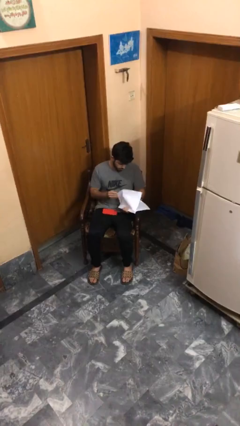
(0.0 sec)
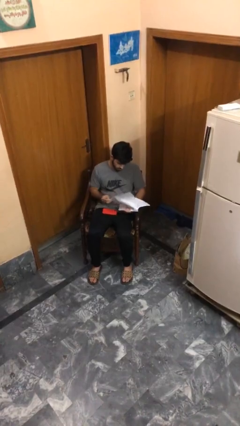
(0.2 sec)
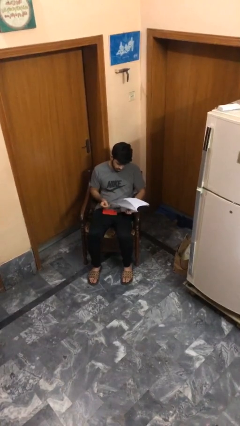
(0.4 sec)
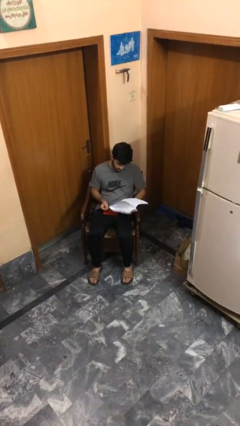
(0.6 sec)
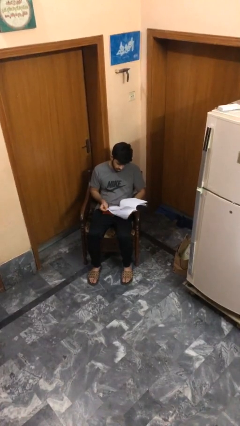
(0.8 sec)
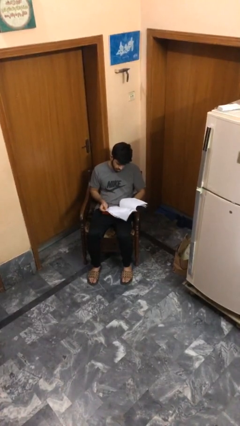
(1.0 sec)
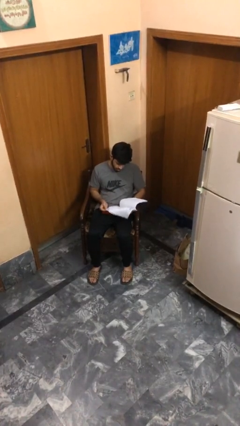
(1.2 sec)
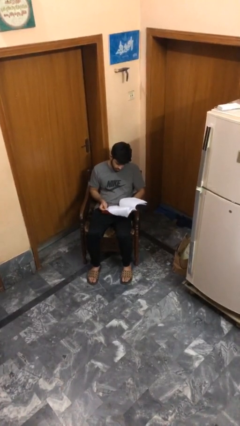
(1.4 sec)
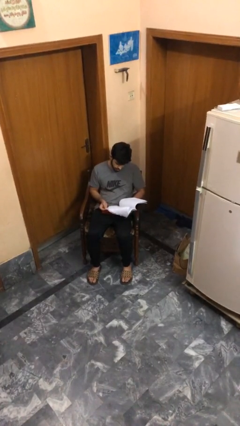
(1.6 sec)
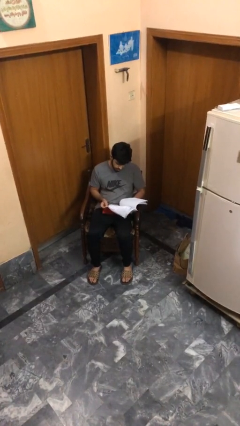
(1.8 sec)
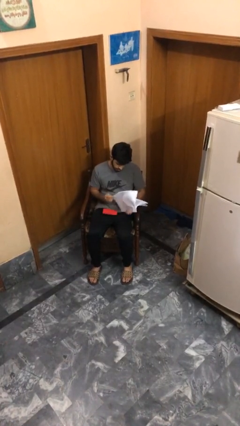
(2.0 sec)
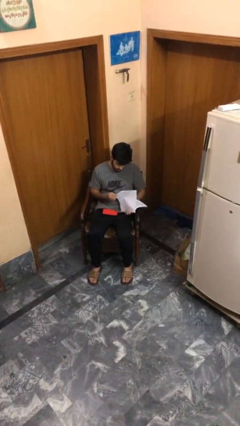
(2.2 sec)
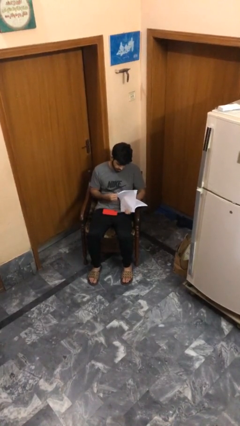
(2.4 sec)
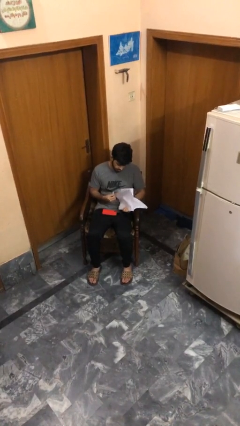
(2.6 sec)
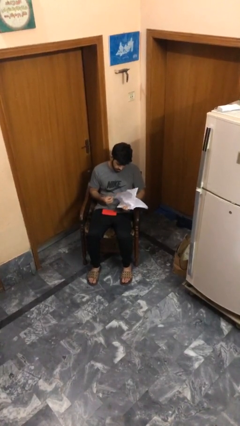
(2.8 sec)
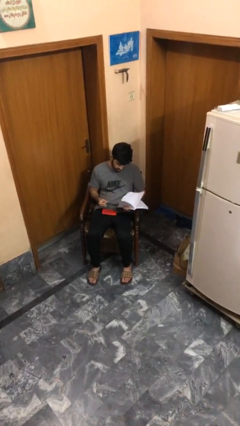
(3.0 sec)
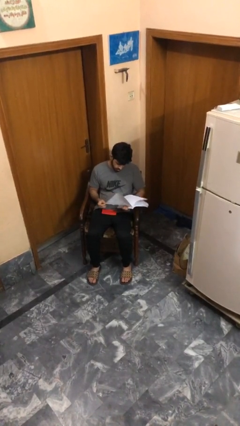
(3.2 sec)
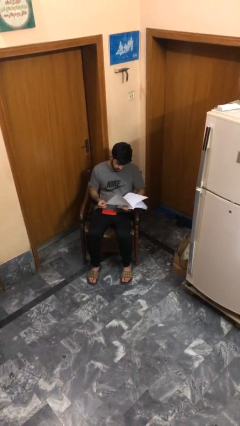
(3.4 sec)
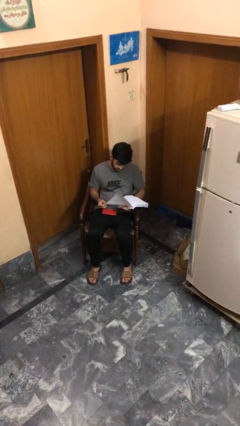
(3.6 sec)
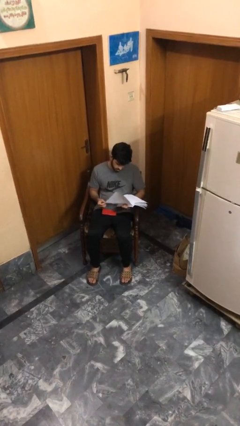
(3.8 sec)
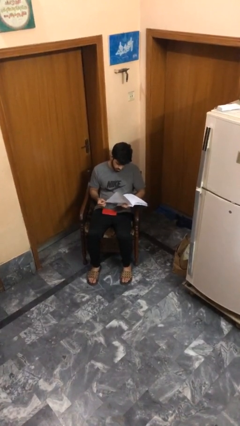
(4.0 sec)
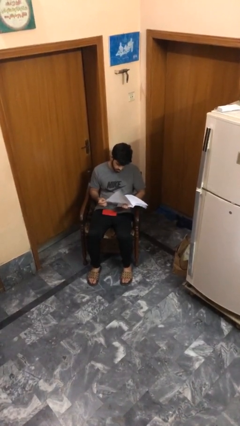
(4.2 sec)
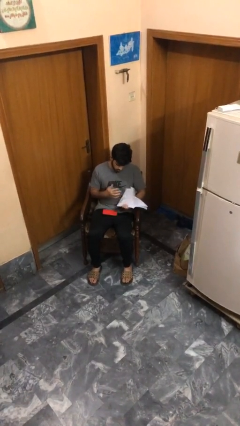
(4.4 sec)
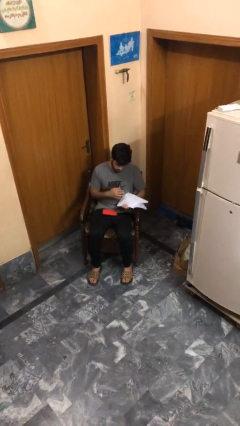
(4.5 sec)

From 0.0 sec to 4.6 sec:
person reads magazine

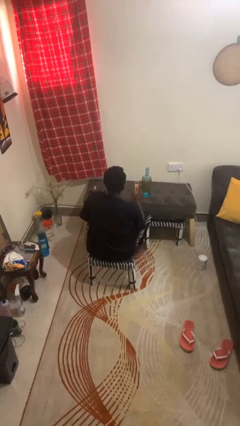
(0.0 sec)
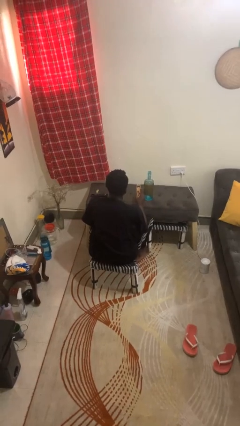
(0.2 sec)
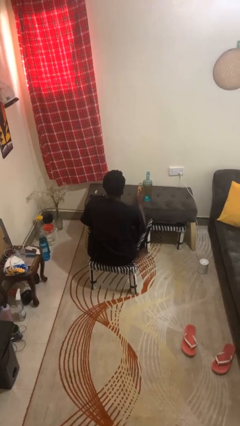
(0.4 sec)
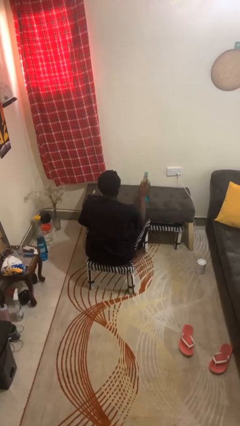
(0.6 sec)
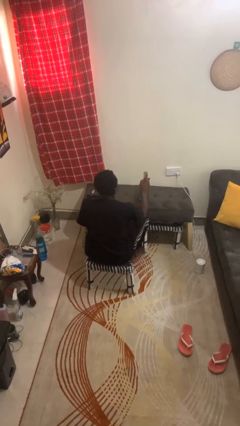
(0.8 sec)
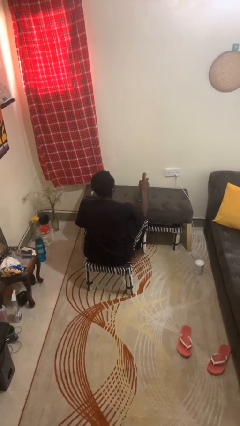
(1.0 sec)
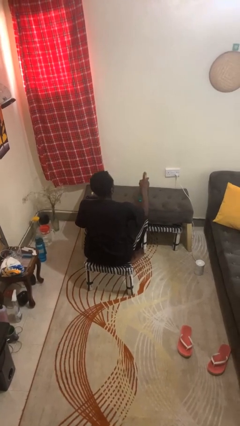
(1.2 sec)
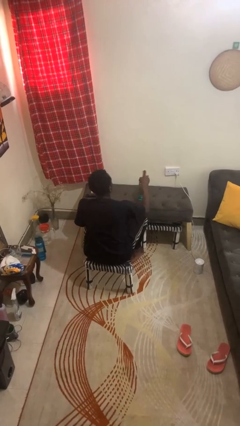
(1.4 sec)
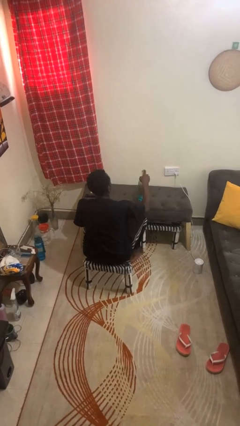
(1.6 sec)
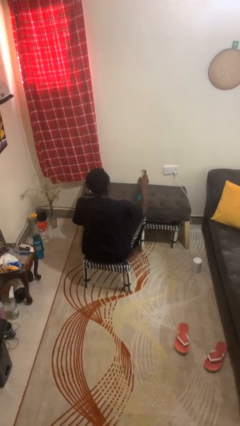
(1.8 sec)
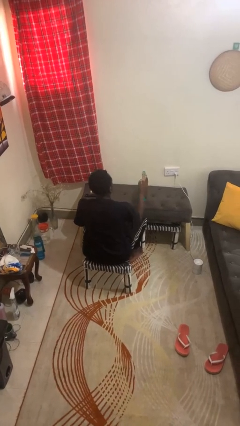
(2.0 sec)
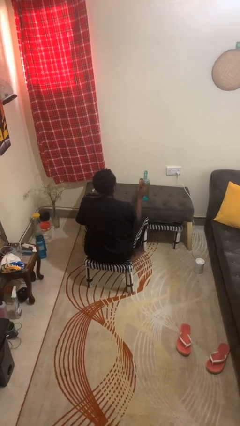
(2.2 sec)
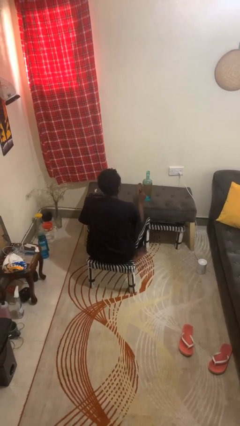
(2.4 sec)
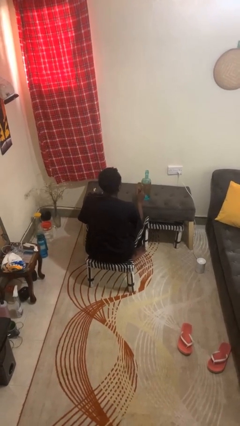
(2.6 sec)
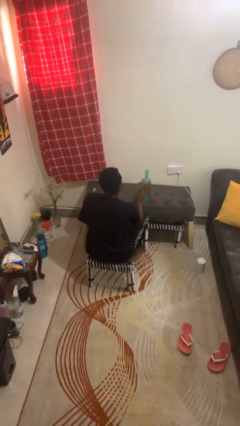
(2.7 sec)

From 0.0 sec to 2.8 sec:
person opens can with can opener

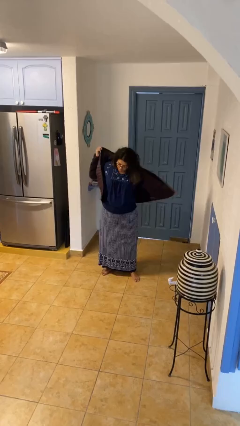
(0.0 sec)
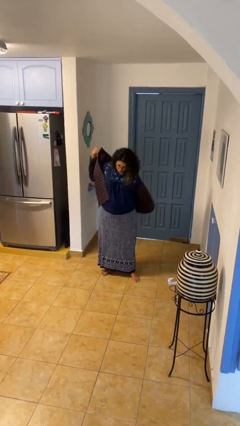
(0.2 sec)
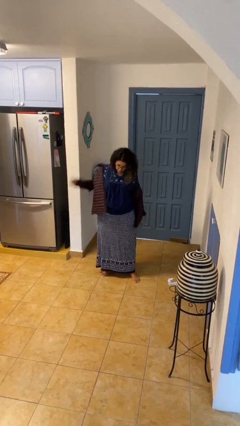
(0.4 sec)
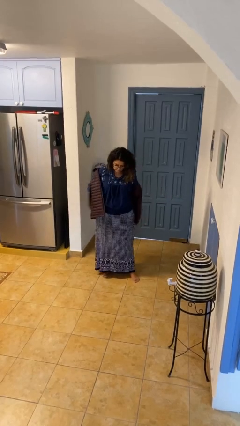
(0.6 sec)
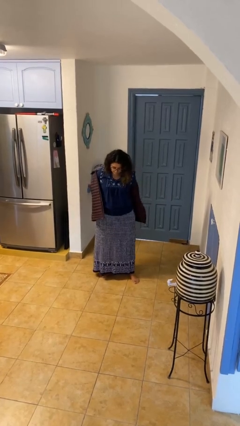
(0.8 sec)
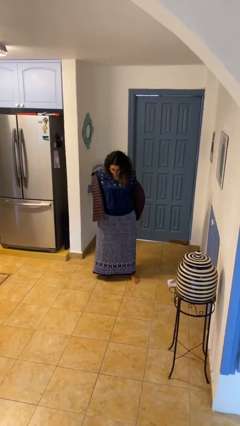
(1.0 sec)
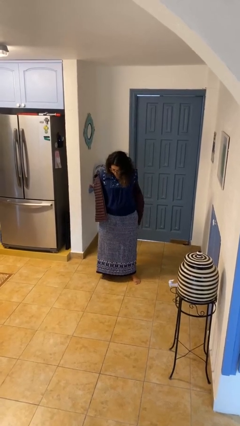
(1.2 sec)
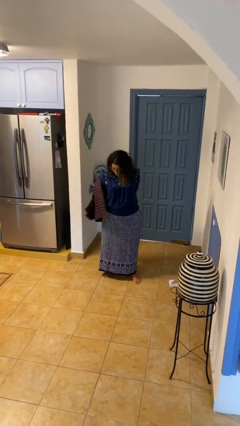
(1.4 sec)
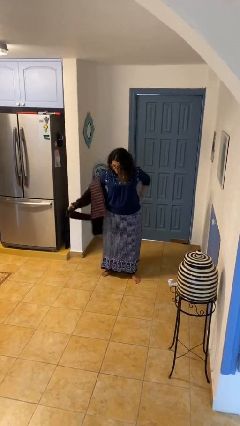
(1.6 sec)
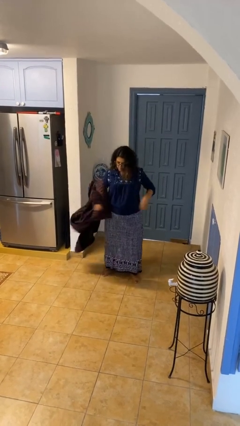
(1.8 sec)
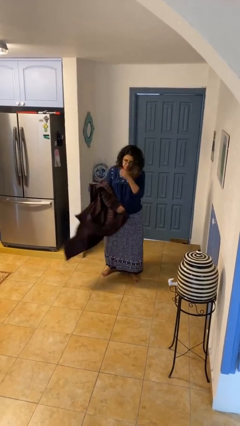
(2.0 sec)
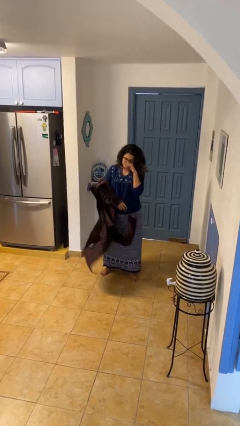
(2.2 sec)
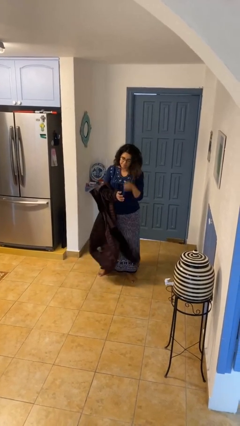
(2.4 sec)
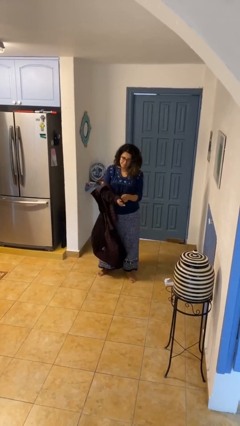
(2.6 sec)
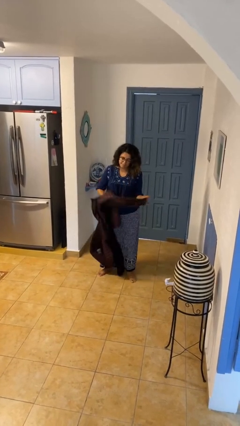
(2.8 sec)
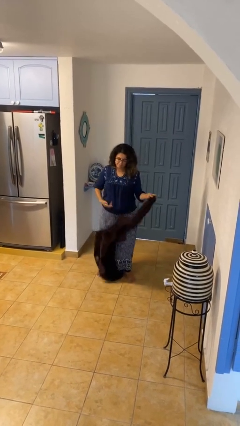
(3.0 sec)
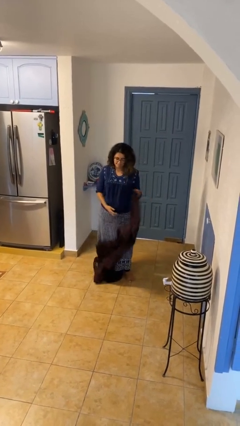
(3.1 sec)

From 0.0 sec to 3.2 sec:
person takes off jacket

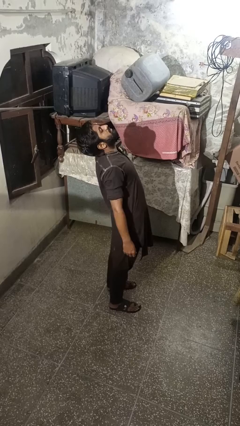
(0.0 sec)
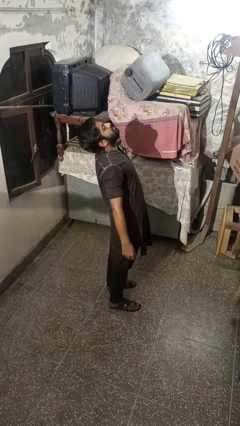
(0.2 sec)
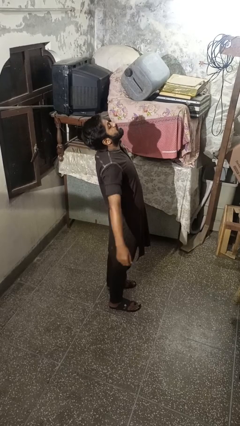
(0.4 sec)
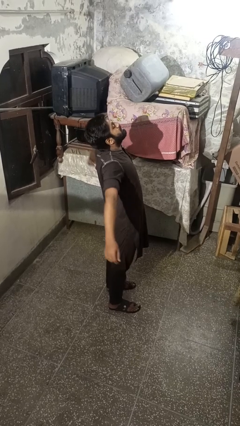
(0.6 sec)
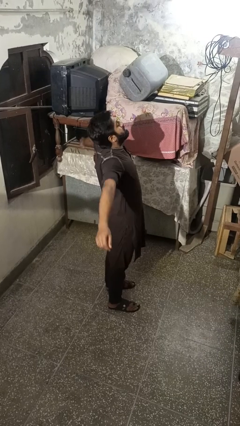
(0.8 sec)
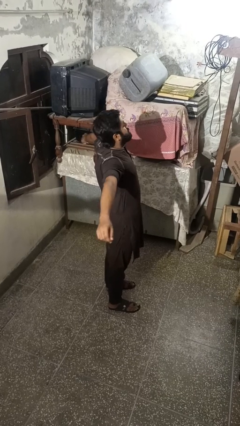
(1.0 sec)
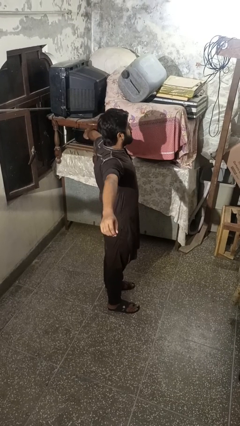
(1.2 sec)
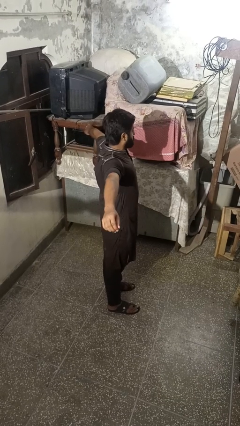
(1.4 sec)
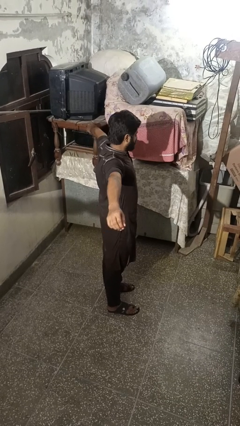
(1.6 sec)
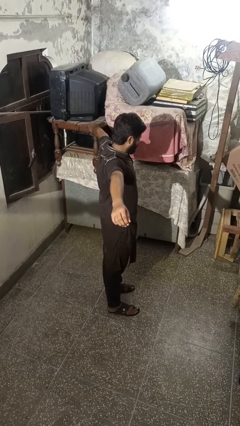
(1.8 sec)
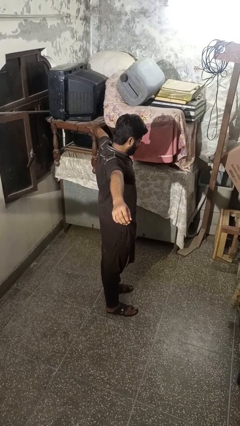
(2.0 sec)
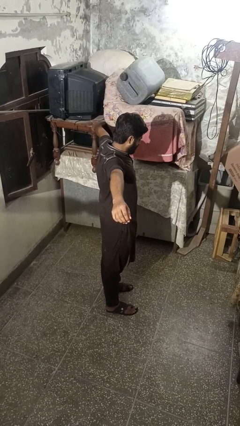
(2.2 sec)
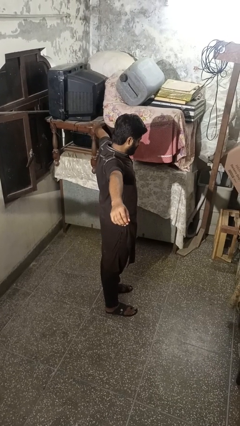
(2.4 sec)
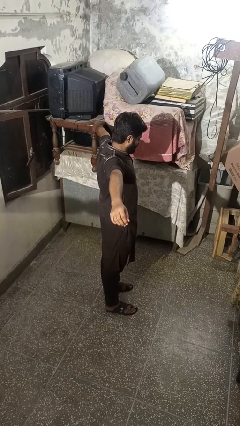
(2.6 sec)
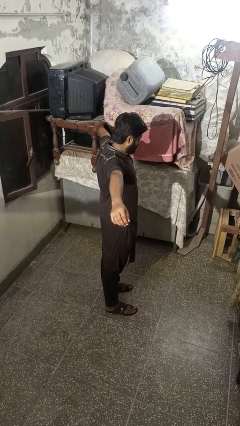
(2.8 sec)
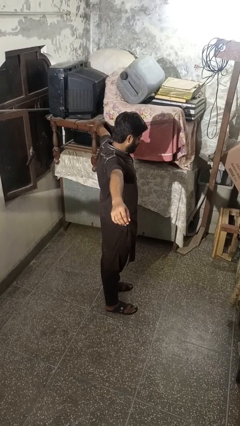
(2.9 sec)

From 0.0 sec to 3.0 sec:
person stretches arms to side

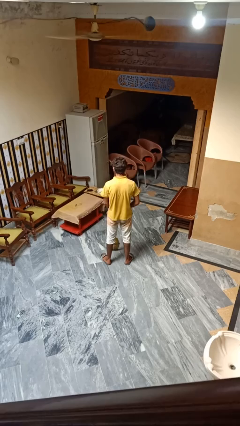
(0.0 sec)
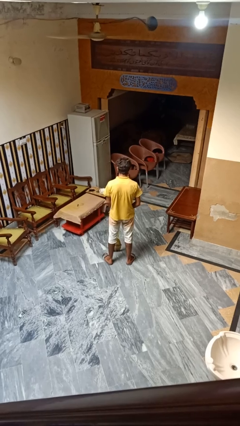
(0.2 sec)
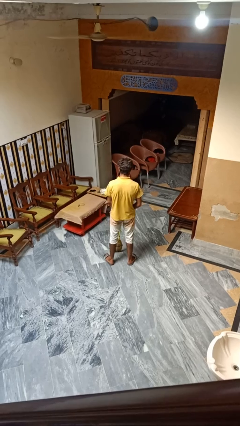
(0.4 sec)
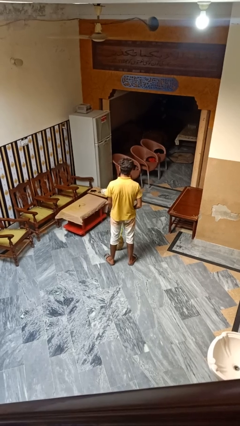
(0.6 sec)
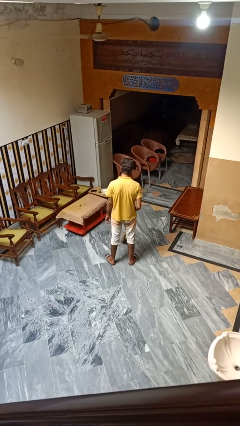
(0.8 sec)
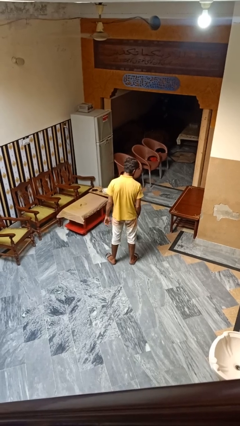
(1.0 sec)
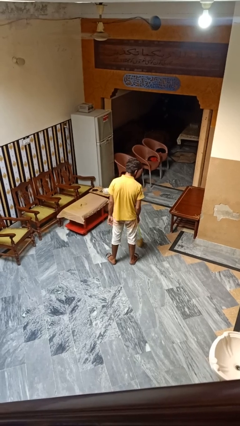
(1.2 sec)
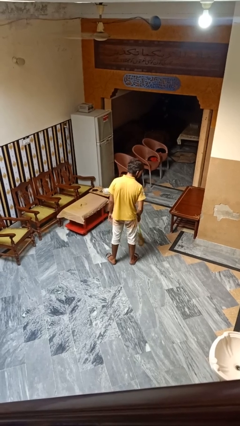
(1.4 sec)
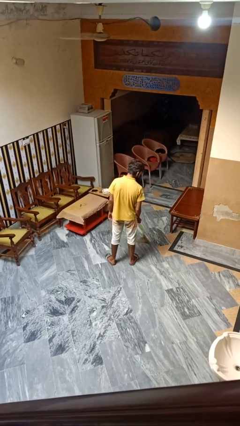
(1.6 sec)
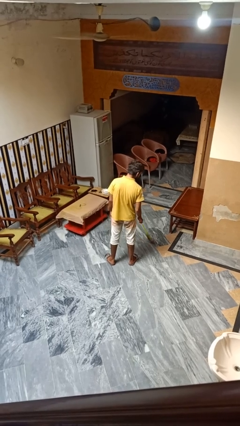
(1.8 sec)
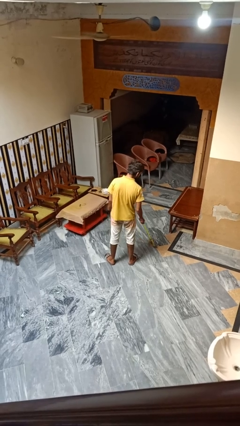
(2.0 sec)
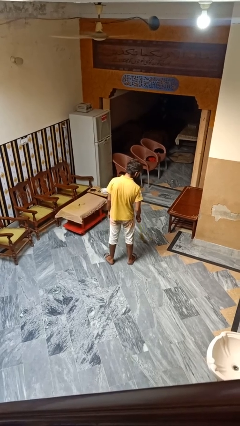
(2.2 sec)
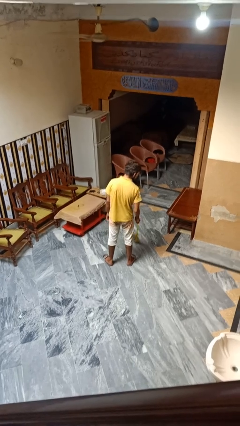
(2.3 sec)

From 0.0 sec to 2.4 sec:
person mops

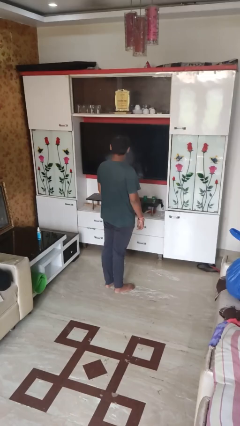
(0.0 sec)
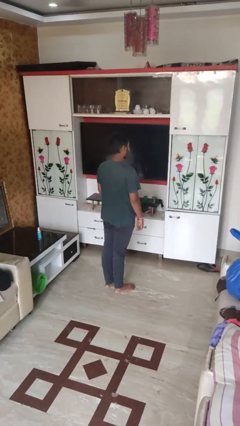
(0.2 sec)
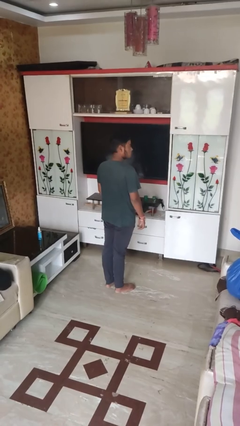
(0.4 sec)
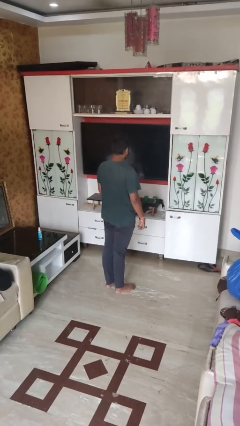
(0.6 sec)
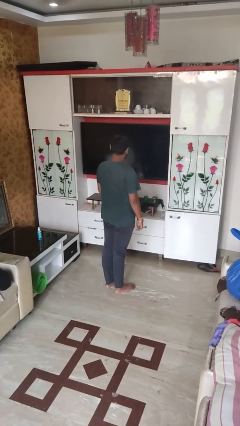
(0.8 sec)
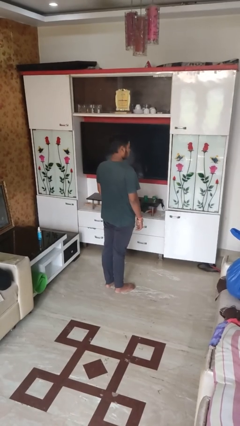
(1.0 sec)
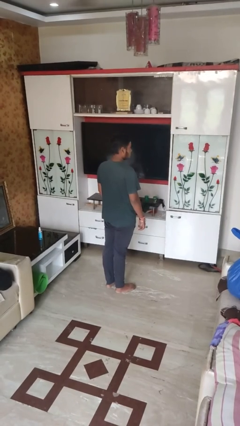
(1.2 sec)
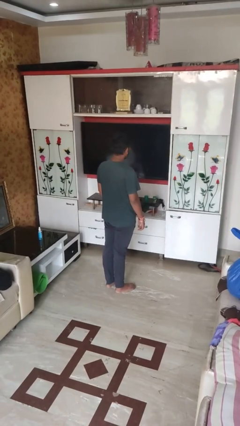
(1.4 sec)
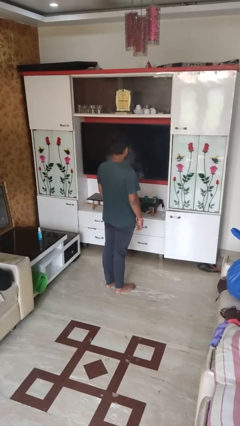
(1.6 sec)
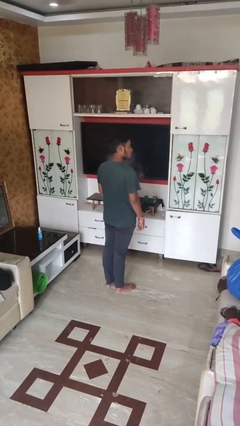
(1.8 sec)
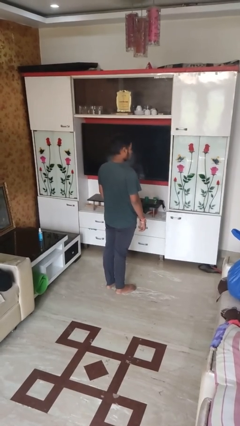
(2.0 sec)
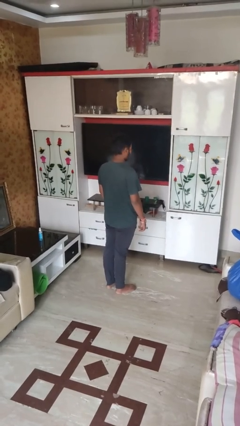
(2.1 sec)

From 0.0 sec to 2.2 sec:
person shakes head
